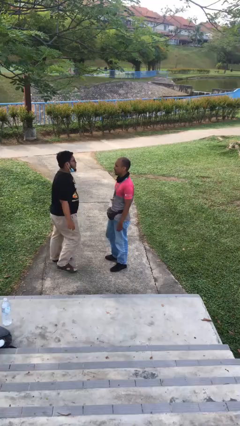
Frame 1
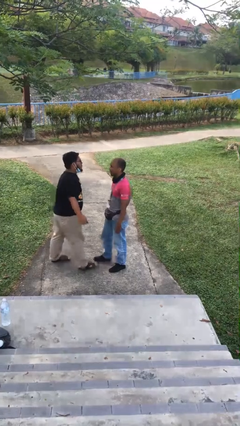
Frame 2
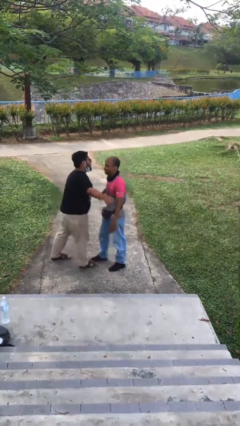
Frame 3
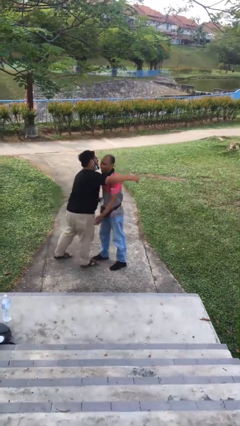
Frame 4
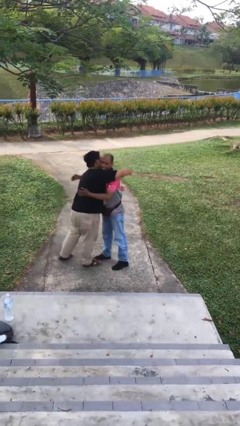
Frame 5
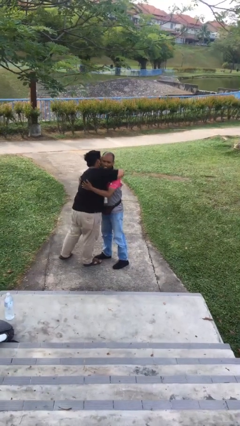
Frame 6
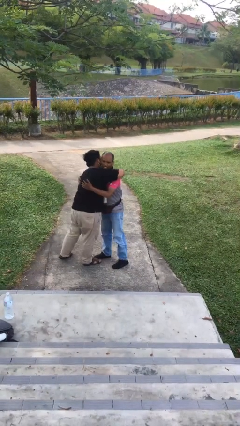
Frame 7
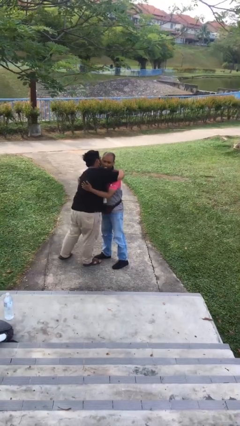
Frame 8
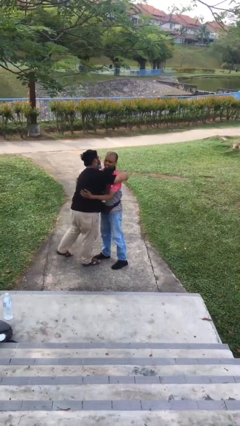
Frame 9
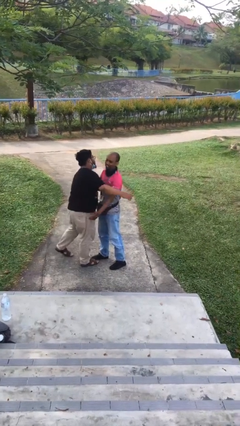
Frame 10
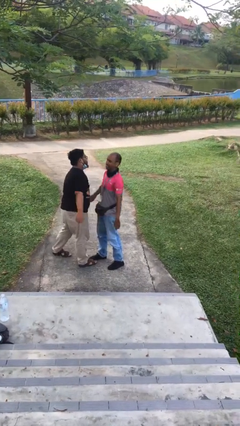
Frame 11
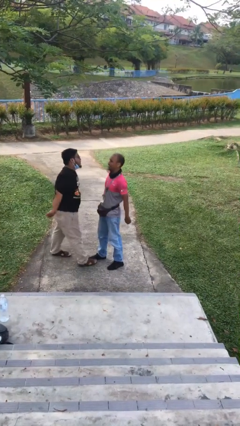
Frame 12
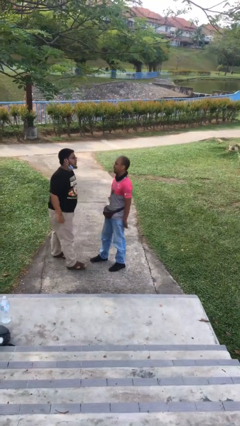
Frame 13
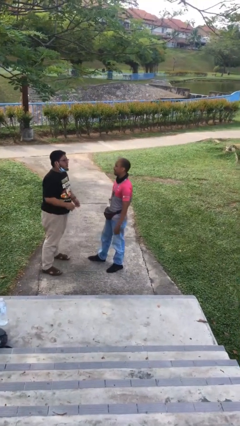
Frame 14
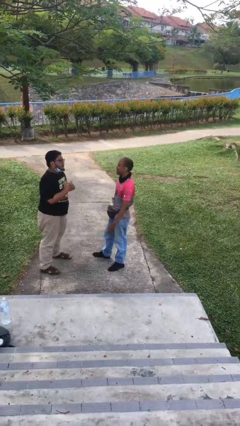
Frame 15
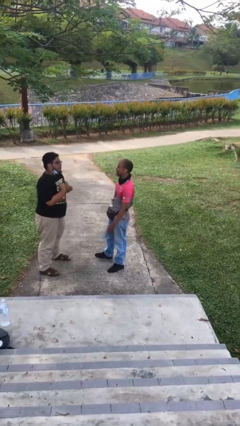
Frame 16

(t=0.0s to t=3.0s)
person embraces person

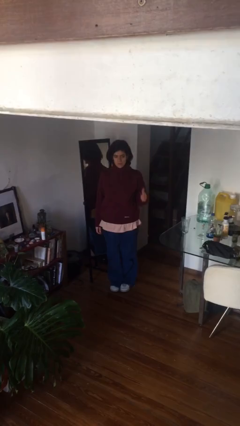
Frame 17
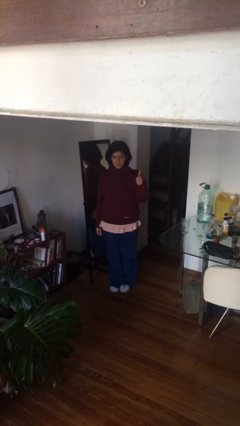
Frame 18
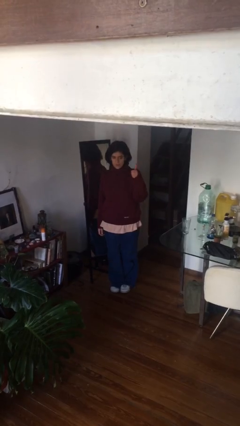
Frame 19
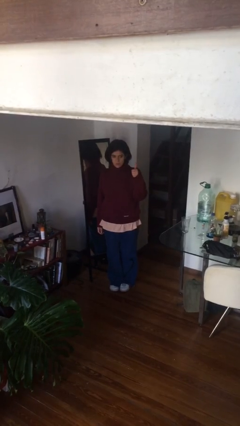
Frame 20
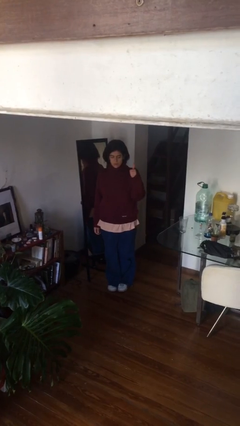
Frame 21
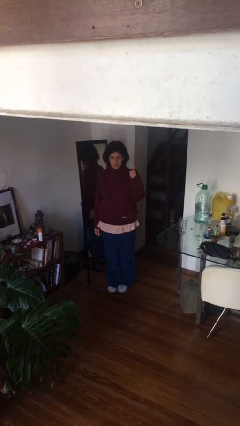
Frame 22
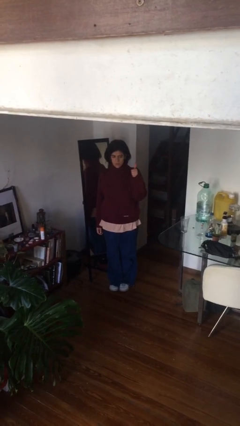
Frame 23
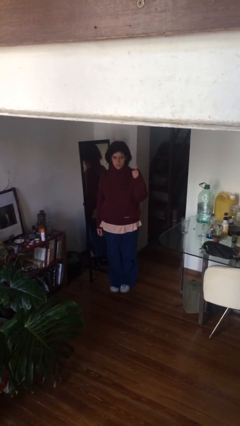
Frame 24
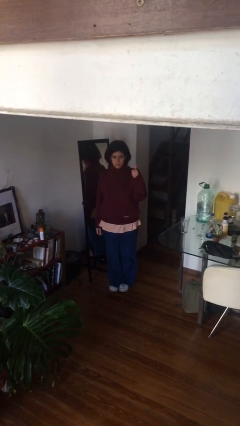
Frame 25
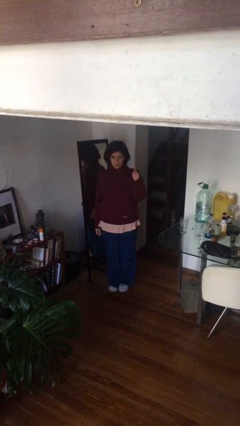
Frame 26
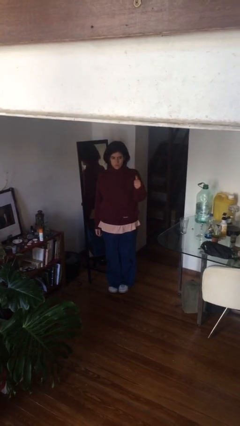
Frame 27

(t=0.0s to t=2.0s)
person gestures thumbs up

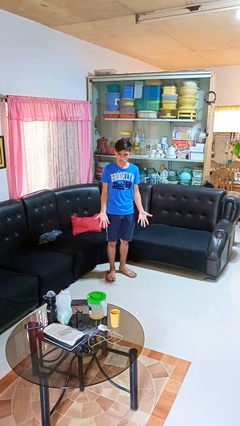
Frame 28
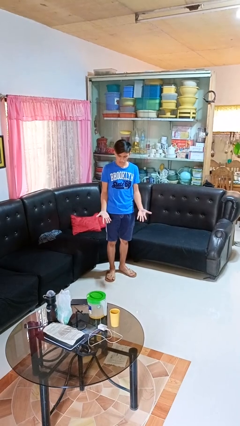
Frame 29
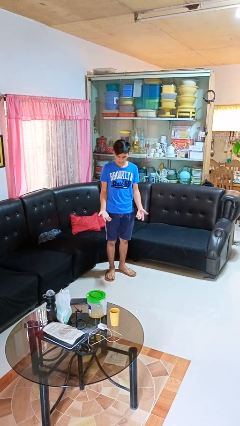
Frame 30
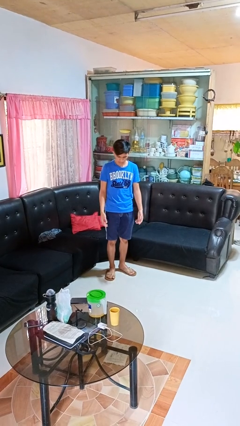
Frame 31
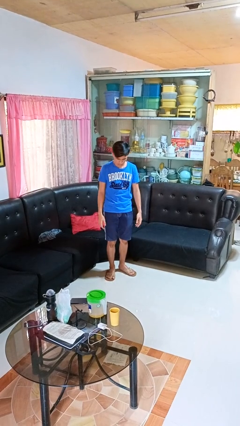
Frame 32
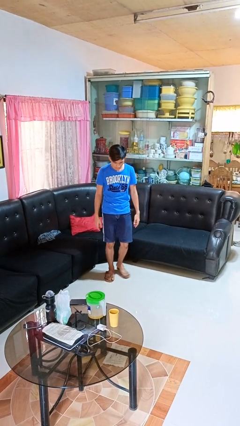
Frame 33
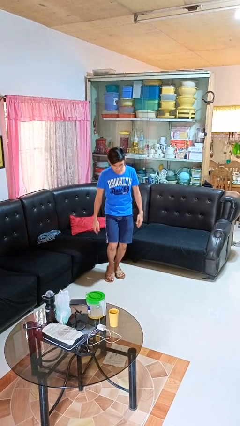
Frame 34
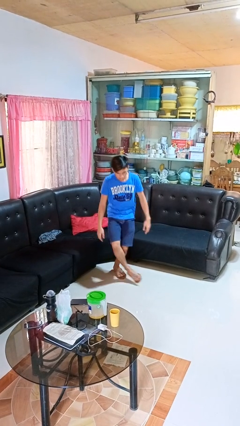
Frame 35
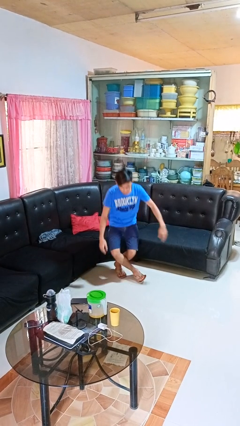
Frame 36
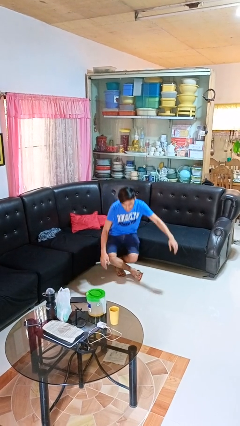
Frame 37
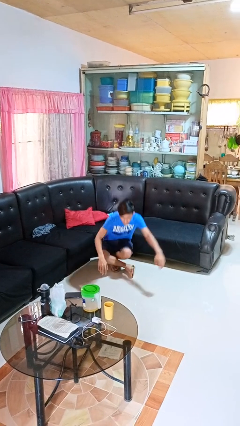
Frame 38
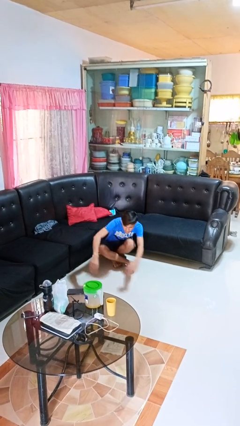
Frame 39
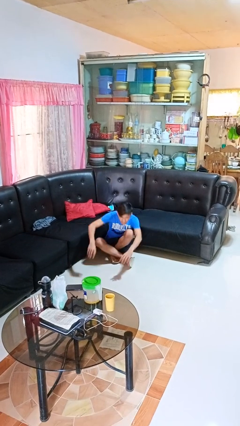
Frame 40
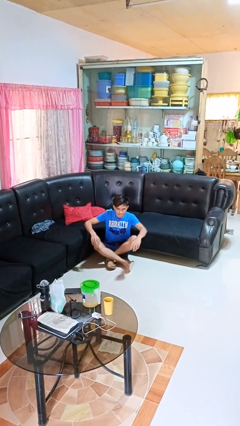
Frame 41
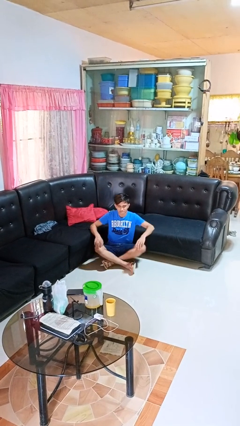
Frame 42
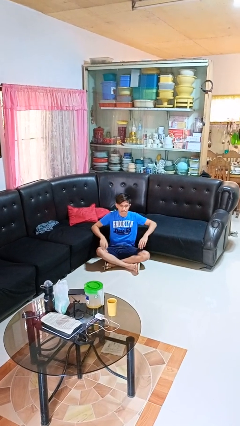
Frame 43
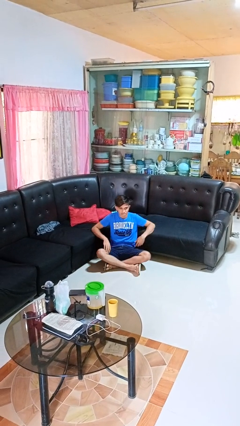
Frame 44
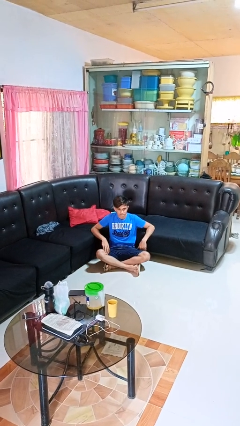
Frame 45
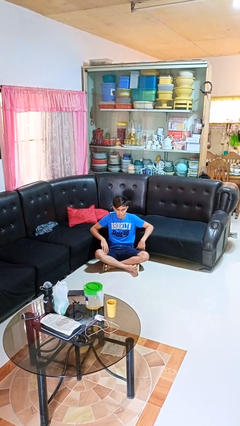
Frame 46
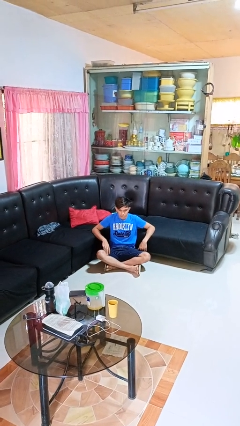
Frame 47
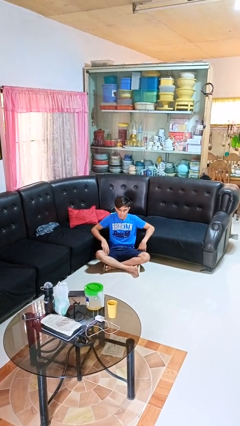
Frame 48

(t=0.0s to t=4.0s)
person sits crisscross

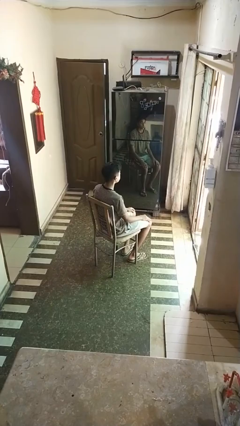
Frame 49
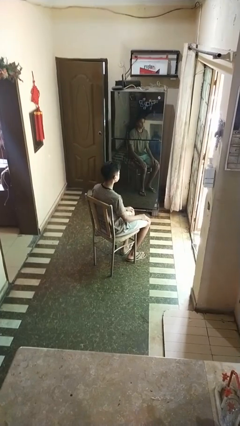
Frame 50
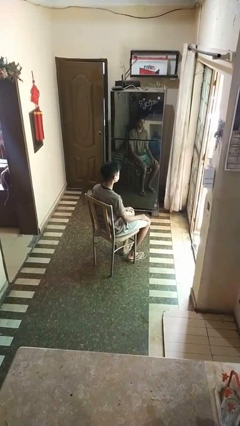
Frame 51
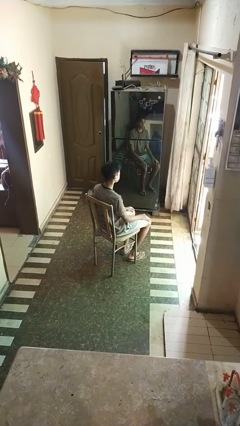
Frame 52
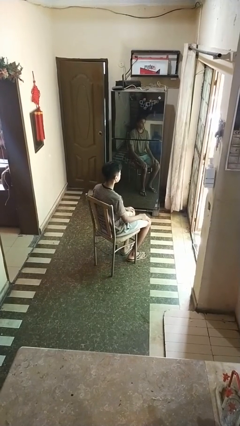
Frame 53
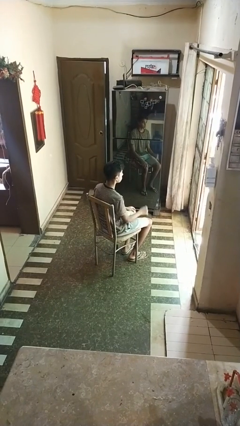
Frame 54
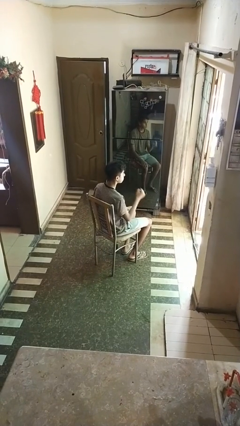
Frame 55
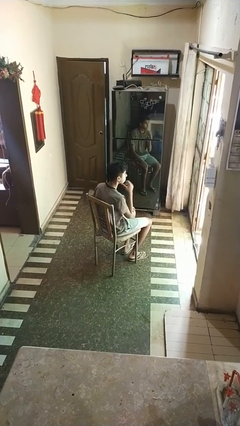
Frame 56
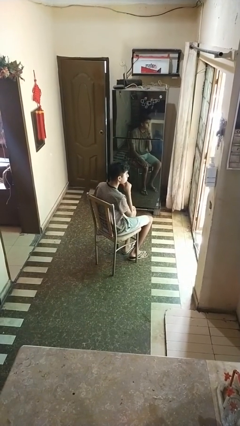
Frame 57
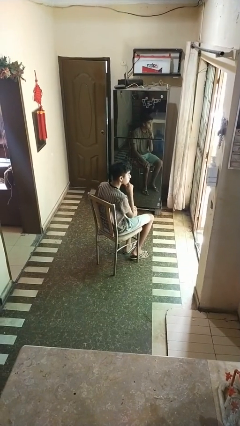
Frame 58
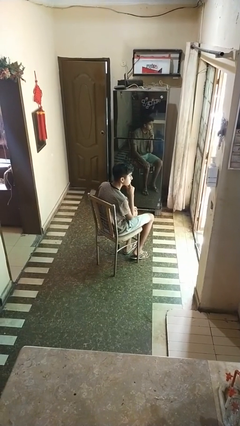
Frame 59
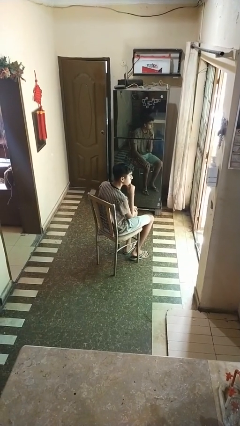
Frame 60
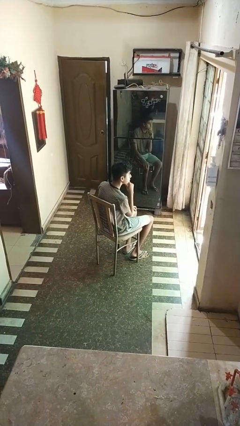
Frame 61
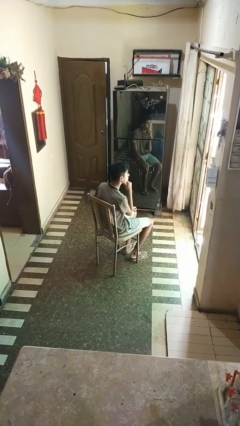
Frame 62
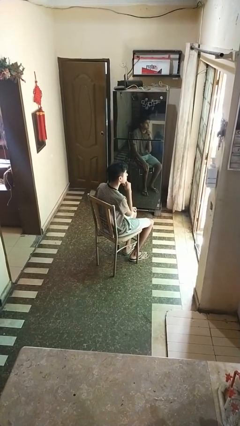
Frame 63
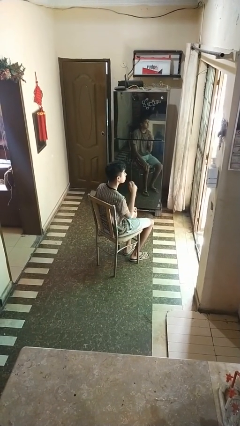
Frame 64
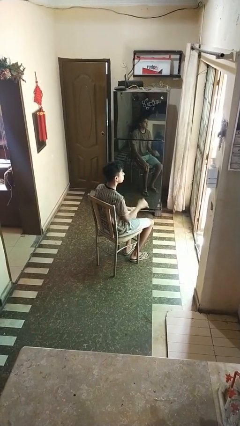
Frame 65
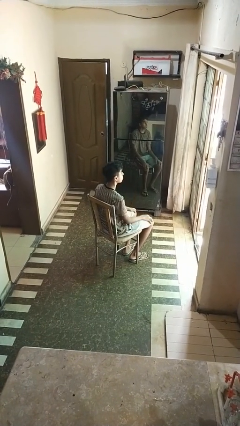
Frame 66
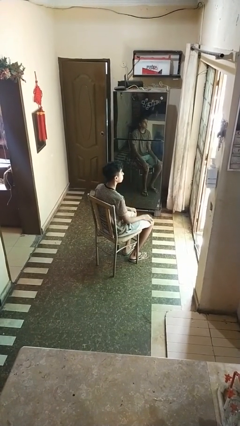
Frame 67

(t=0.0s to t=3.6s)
person strokes chin

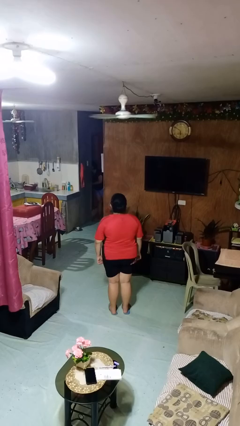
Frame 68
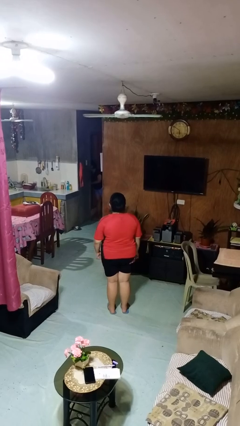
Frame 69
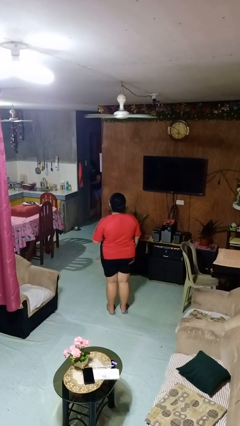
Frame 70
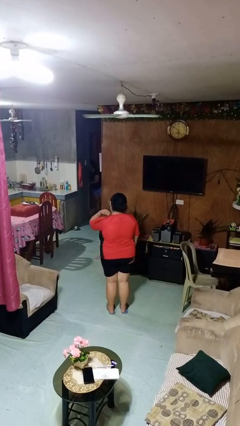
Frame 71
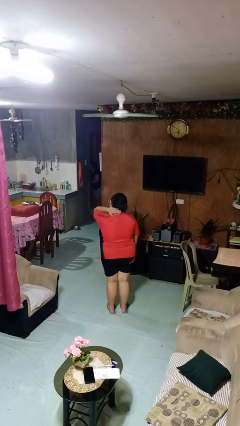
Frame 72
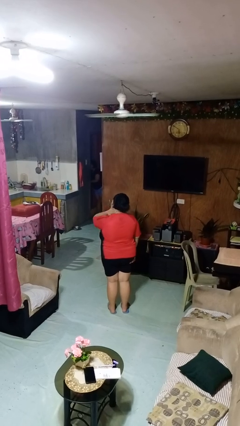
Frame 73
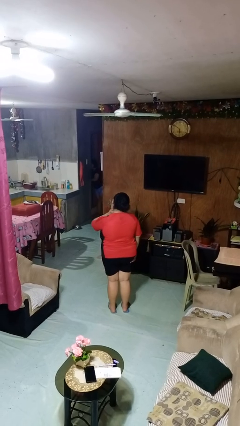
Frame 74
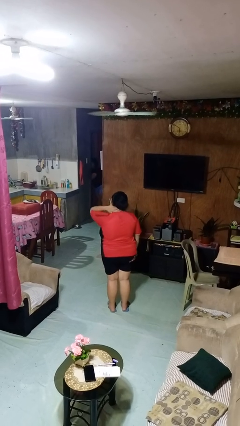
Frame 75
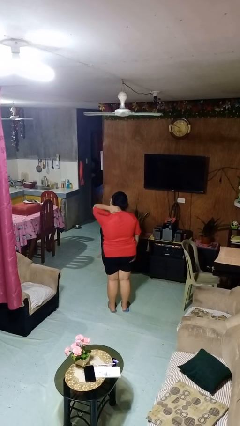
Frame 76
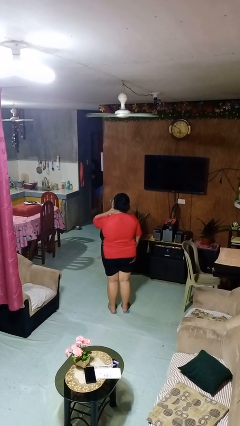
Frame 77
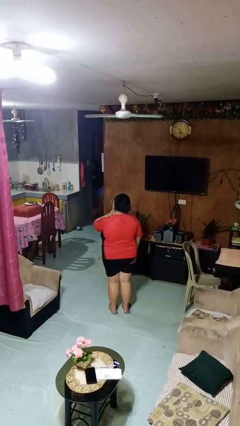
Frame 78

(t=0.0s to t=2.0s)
person rubs neck

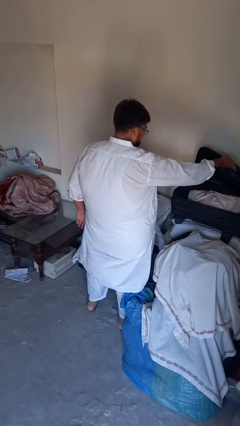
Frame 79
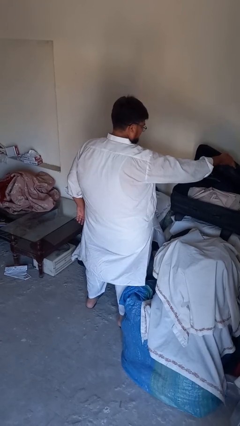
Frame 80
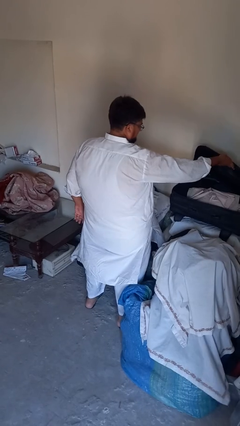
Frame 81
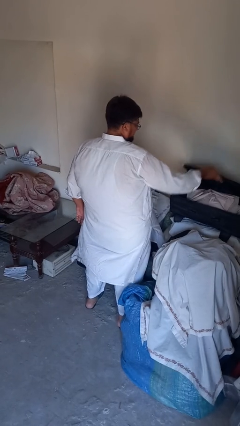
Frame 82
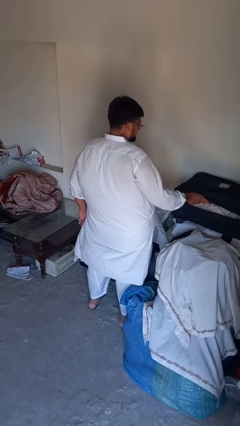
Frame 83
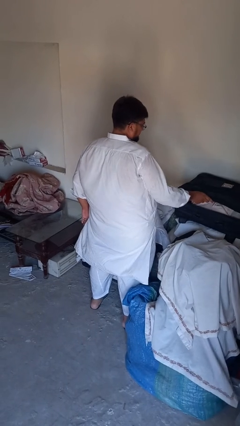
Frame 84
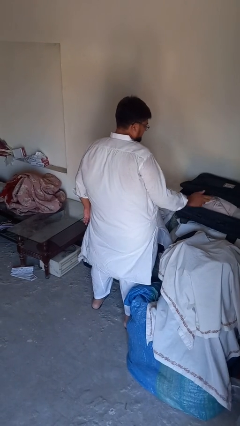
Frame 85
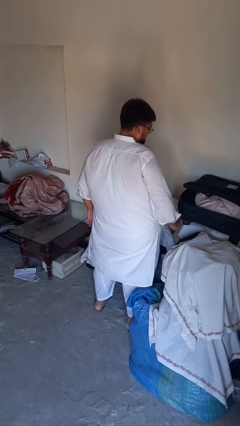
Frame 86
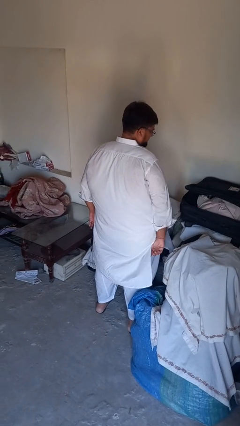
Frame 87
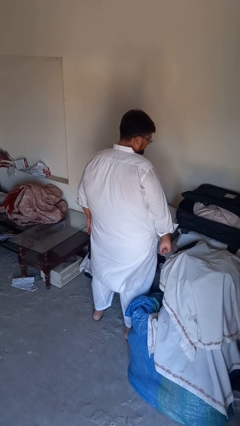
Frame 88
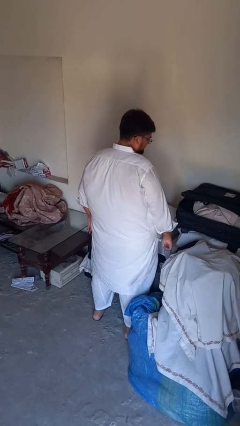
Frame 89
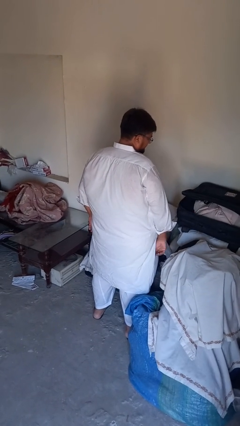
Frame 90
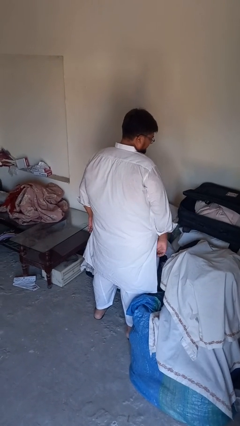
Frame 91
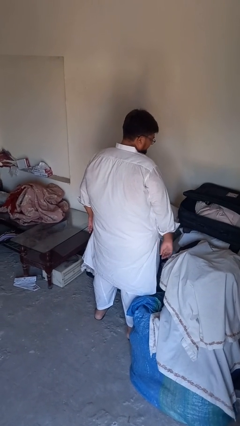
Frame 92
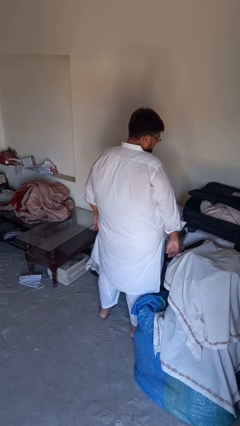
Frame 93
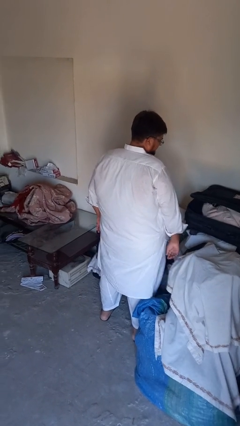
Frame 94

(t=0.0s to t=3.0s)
person closes suitcase
